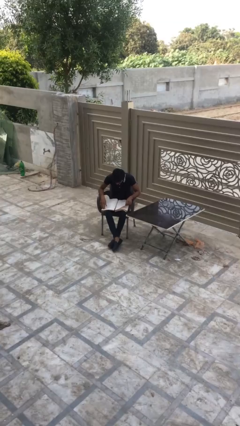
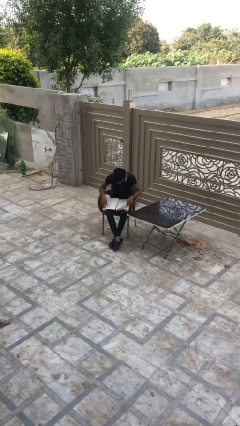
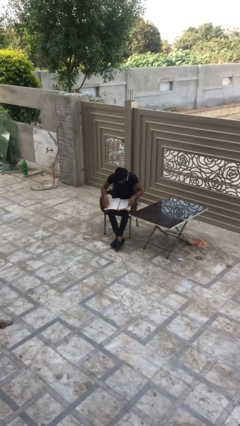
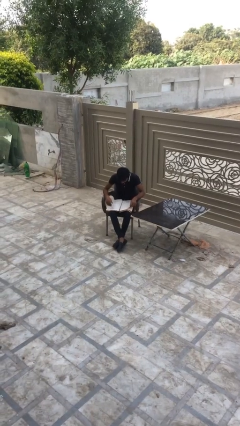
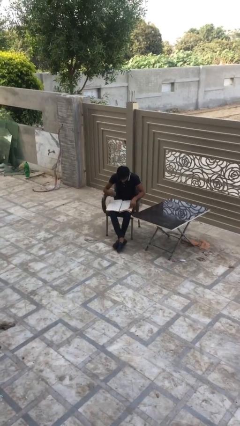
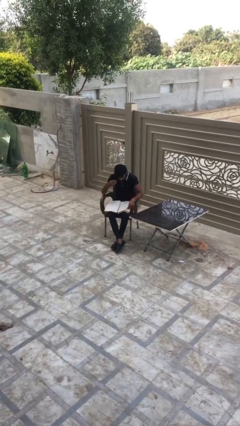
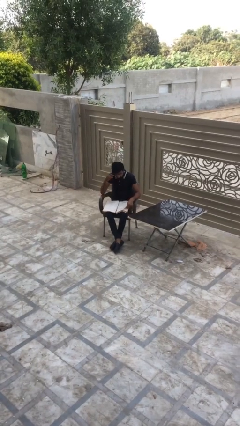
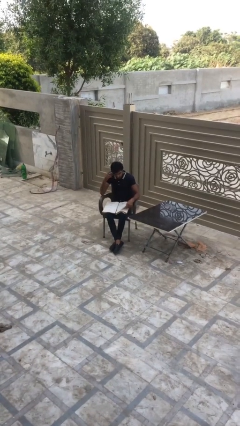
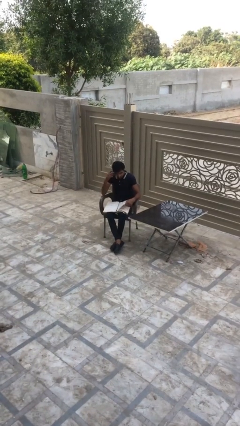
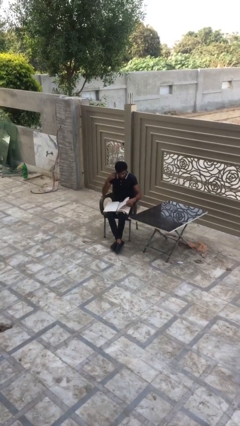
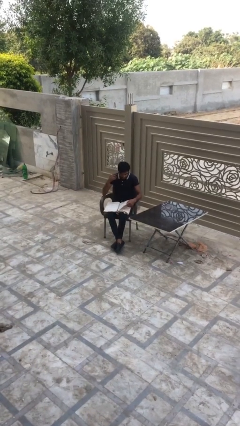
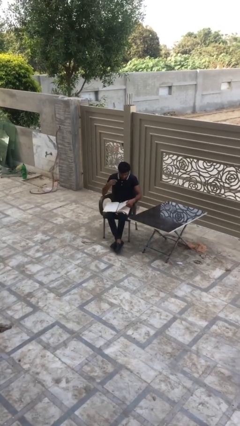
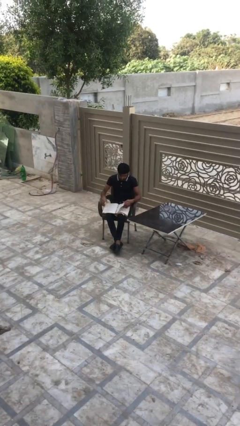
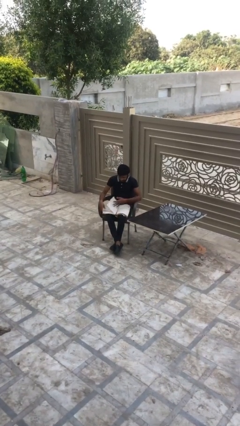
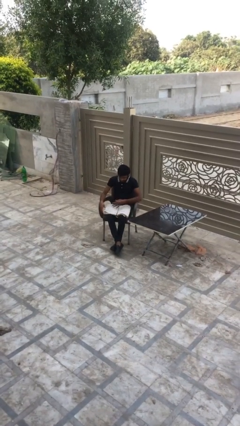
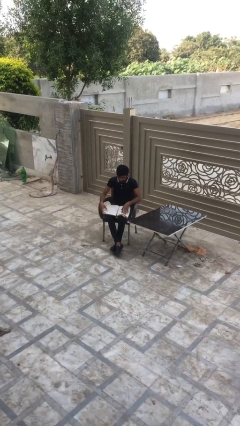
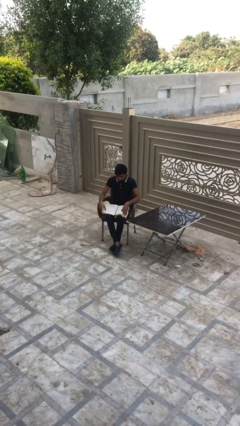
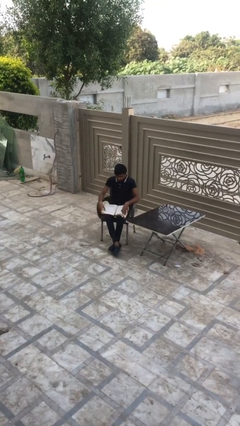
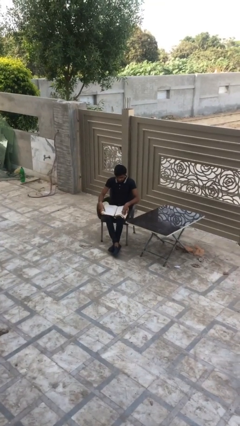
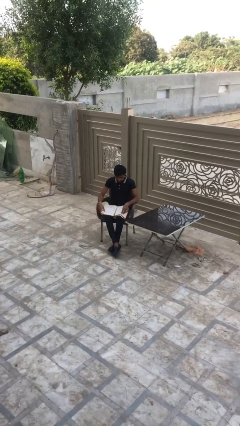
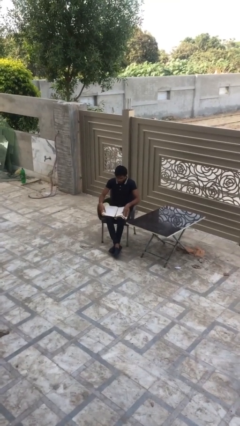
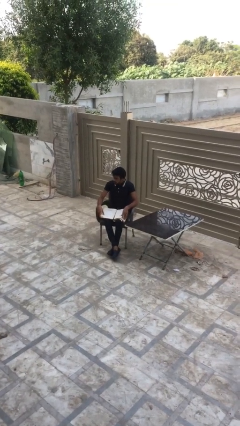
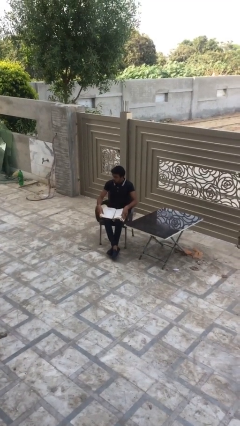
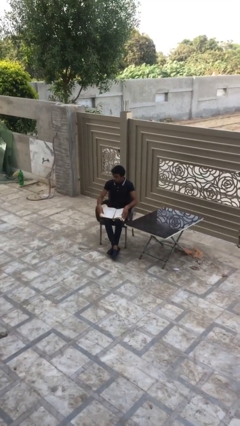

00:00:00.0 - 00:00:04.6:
person reads document

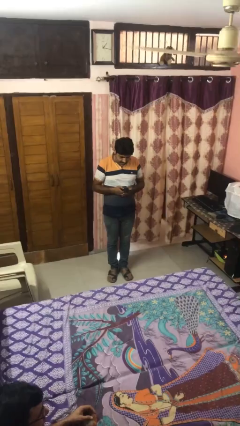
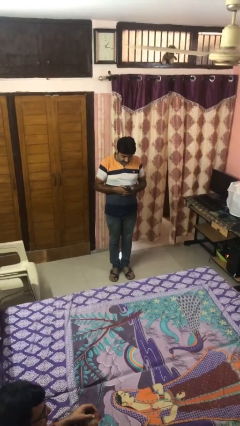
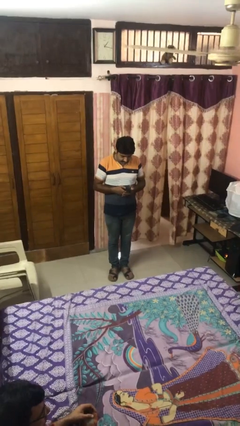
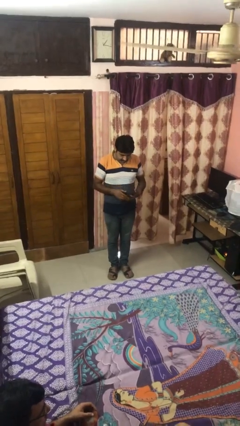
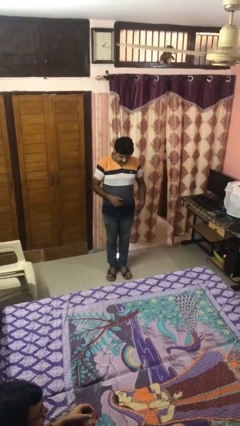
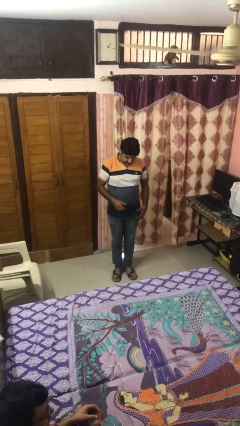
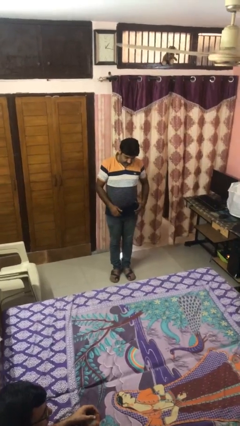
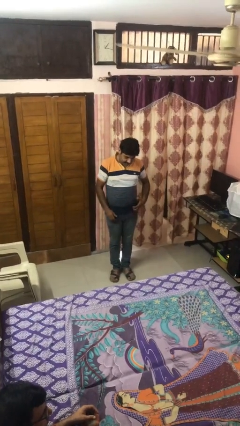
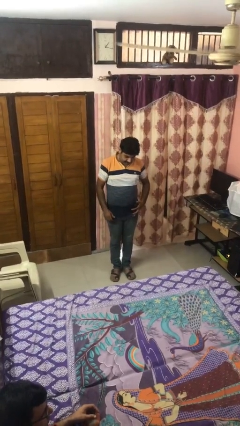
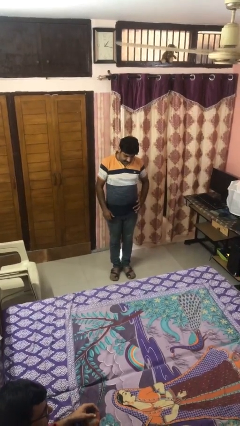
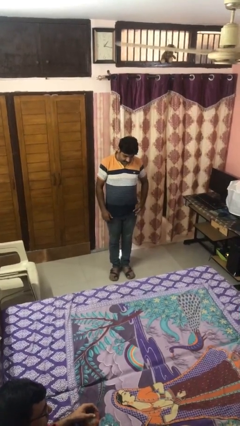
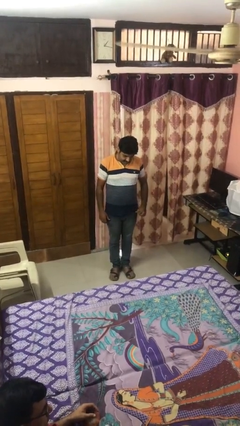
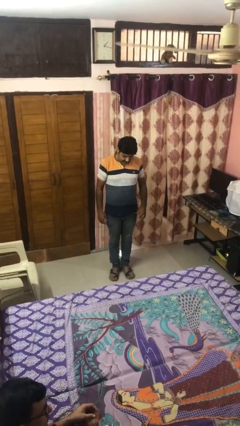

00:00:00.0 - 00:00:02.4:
person puts phone into pocket

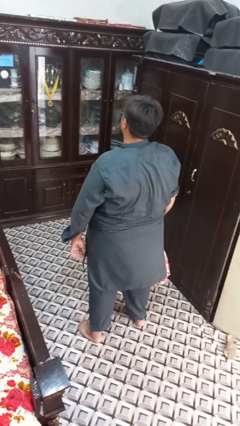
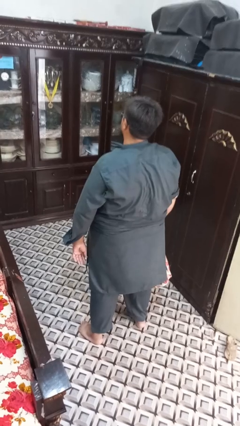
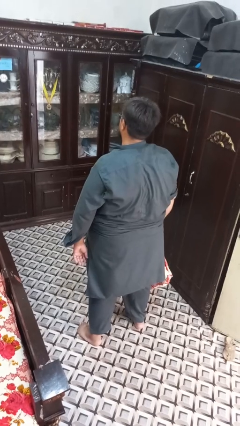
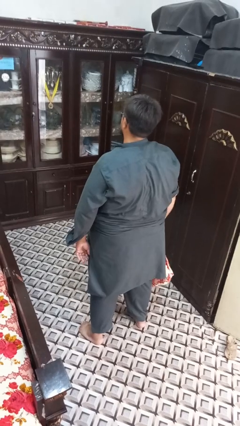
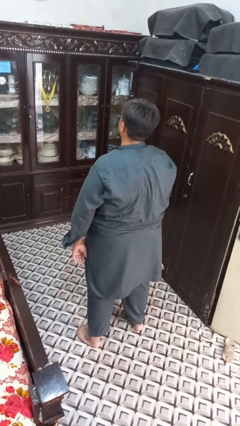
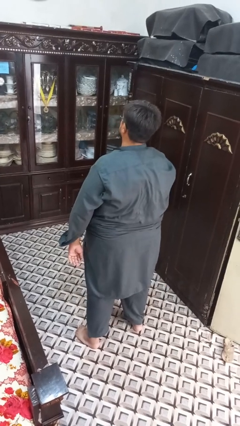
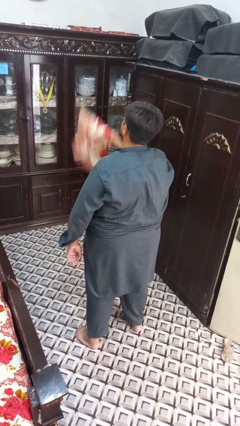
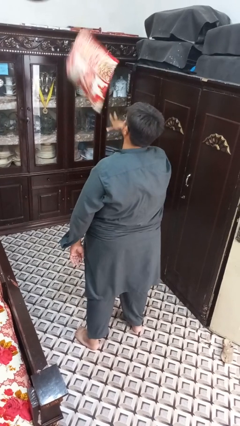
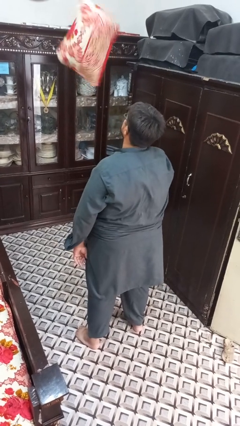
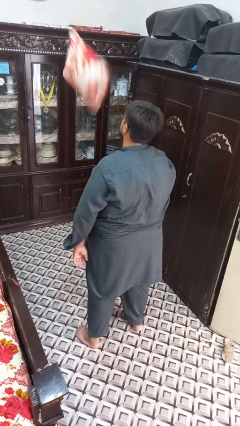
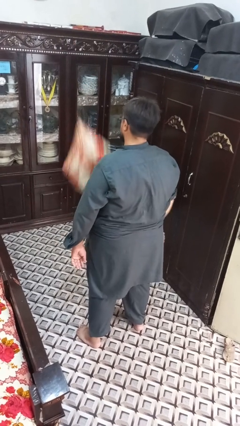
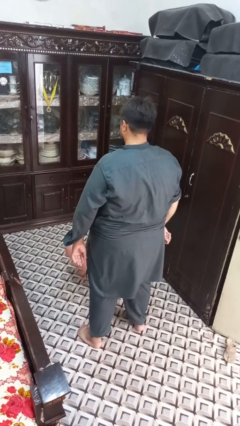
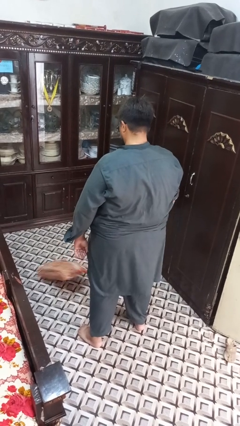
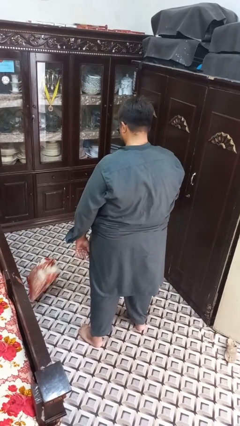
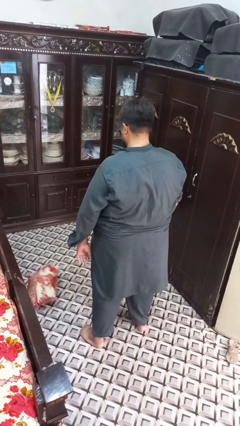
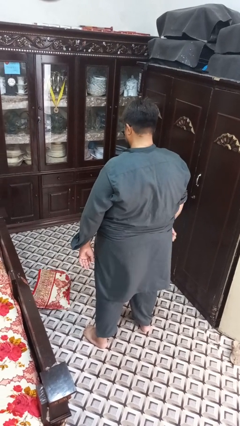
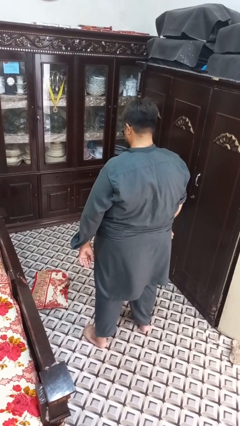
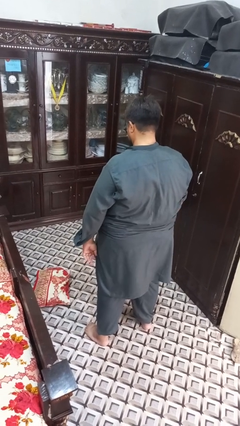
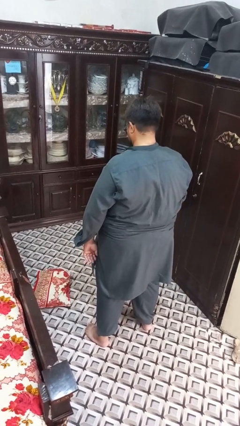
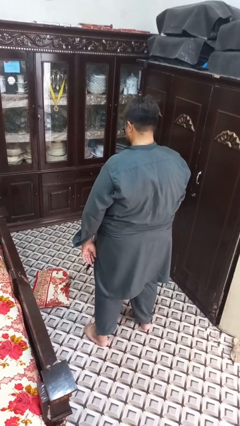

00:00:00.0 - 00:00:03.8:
person throws object into air

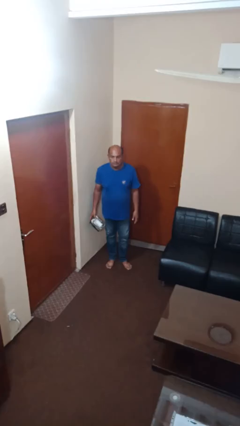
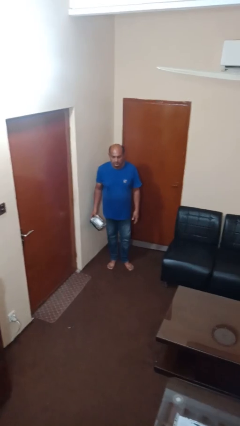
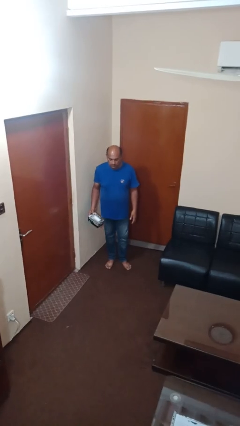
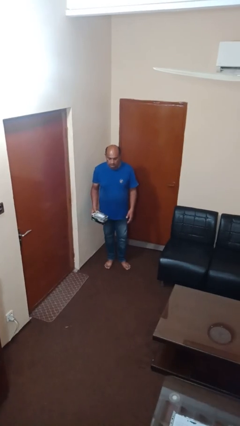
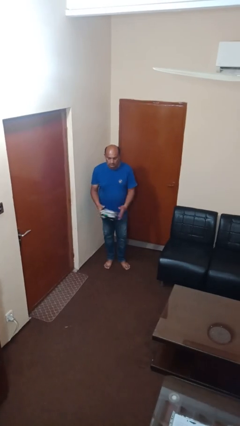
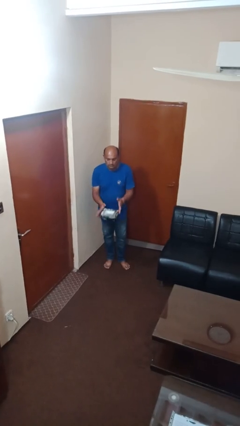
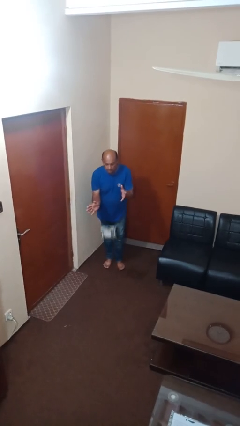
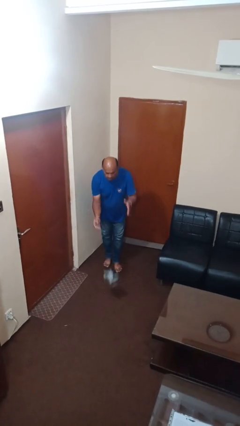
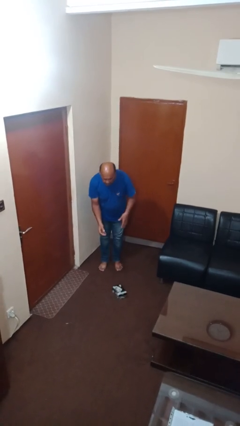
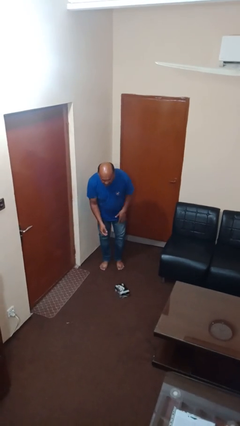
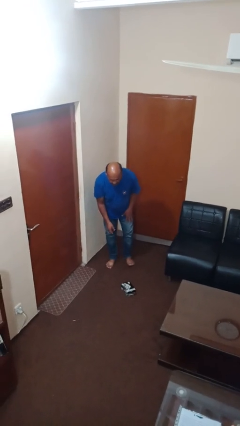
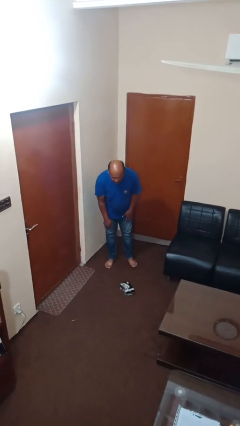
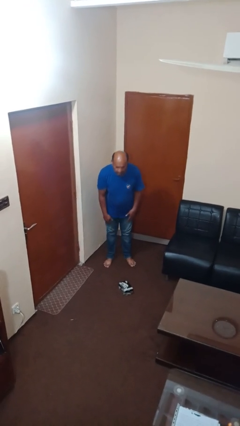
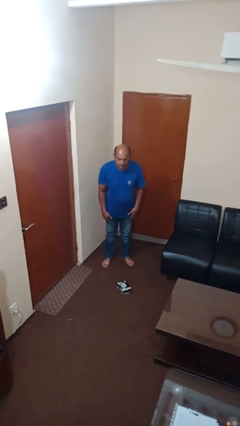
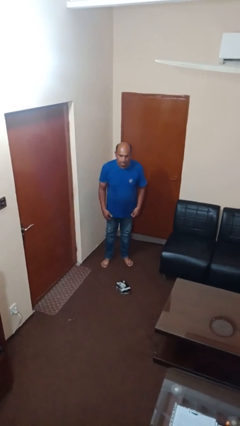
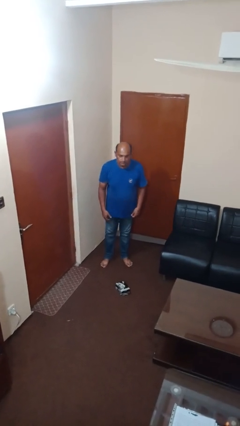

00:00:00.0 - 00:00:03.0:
person drops object

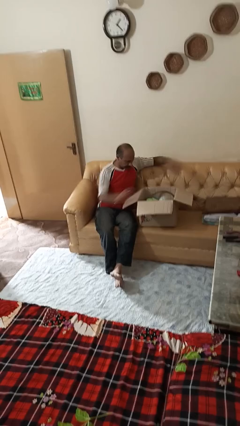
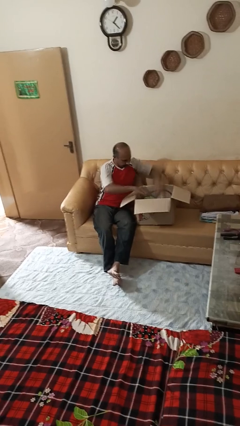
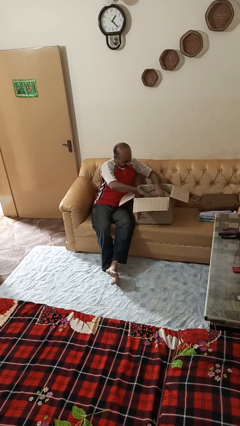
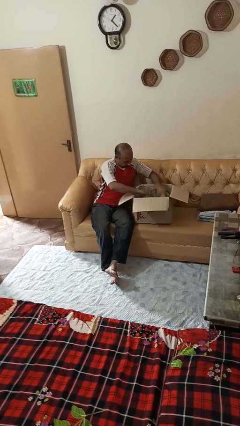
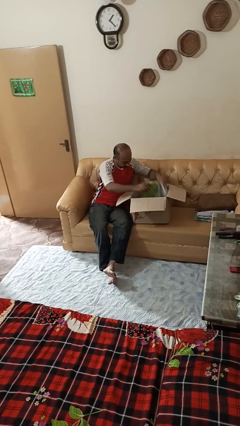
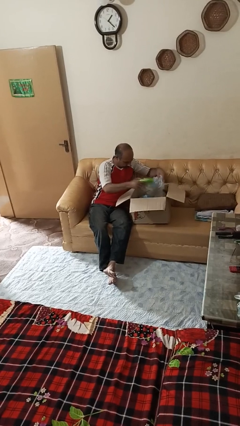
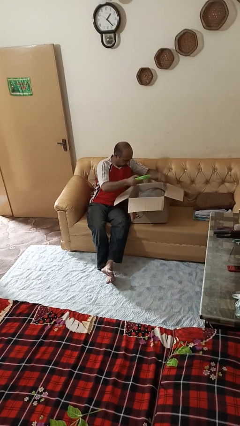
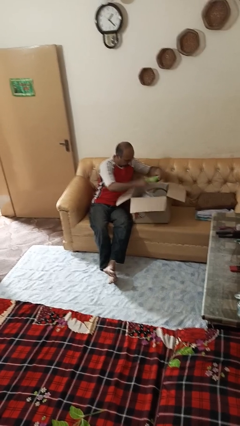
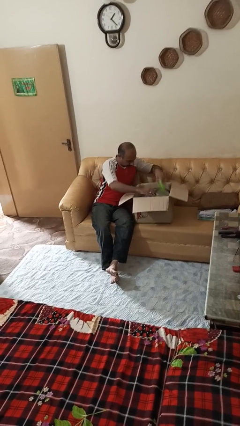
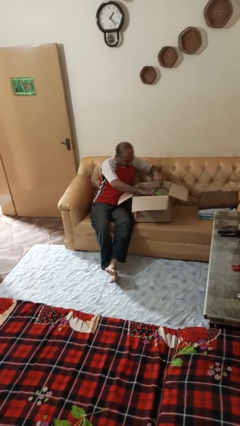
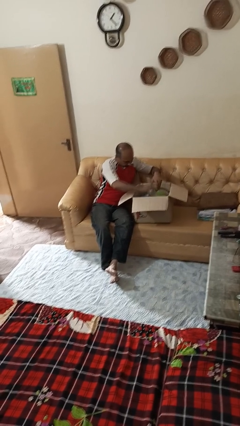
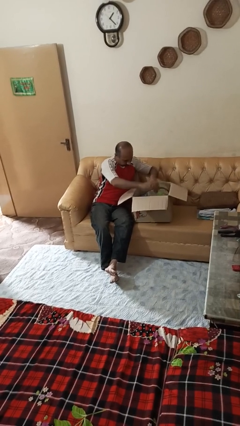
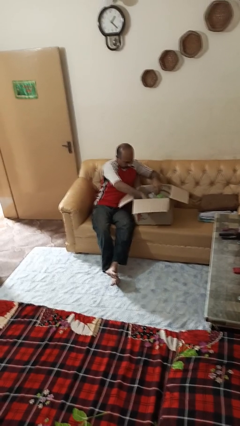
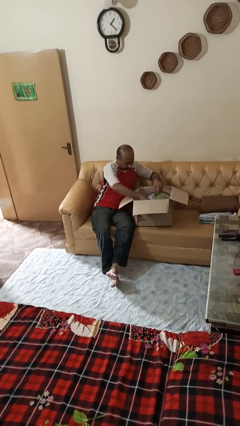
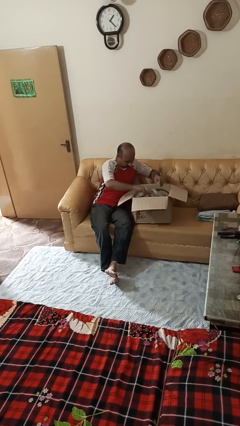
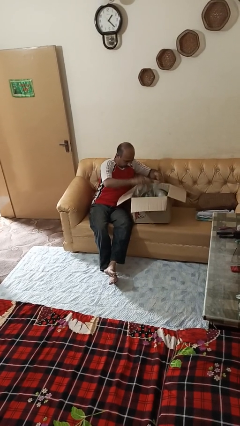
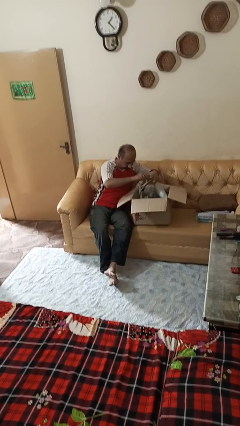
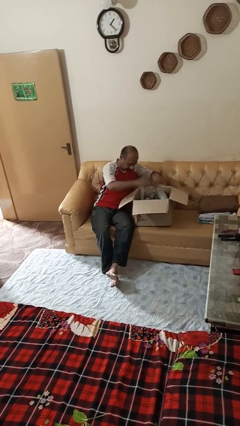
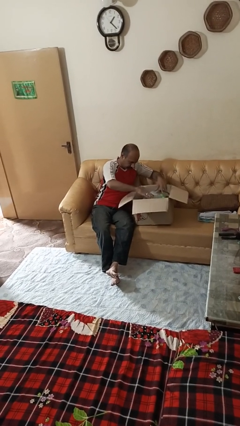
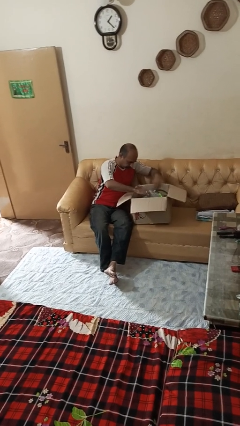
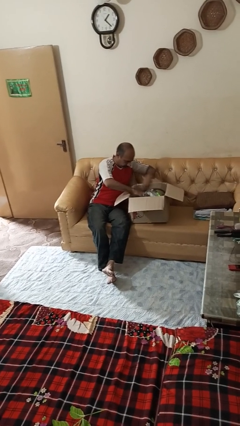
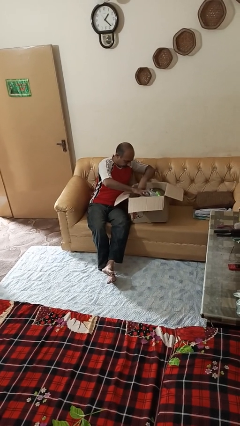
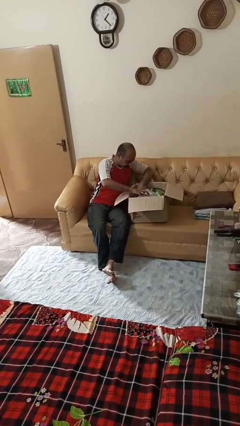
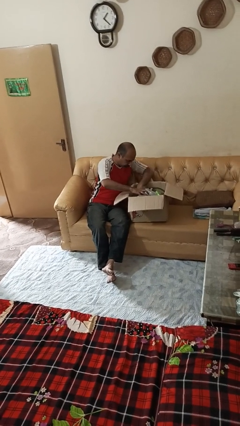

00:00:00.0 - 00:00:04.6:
person searches in box
